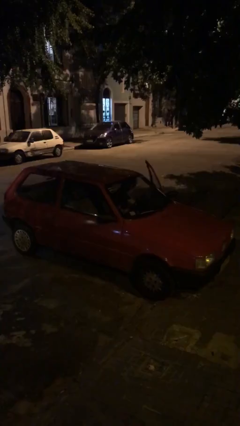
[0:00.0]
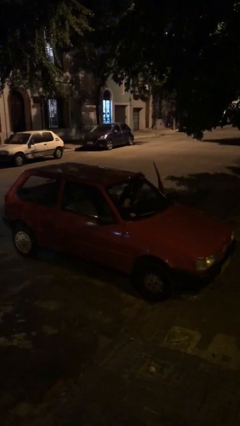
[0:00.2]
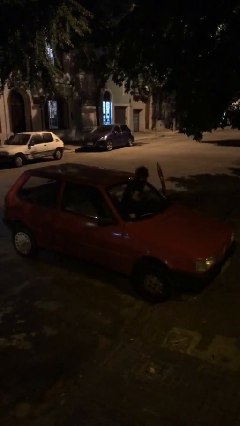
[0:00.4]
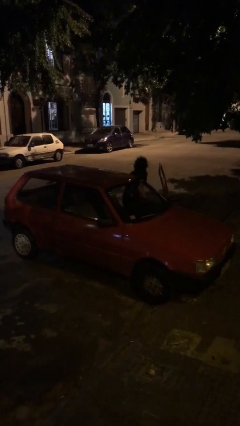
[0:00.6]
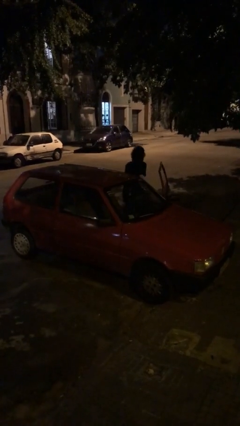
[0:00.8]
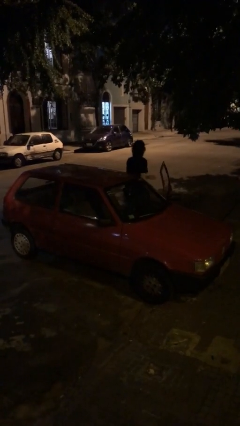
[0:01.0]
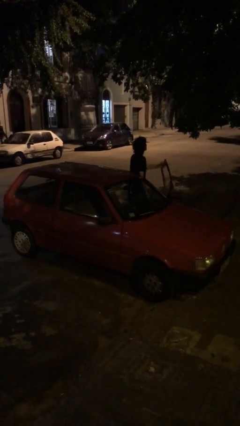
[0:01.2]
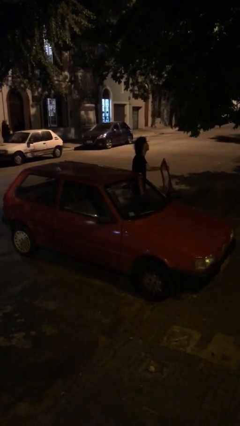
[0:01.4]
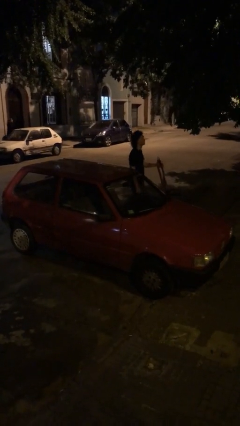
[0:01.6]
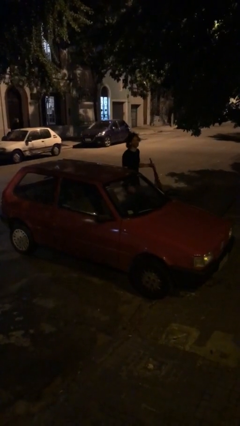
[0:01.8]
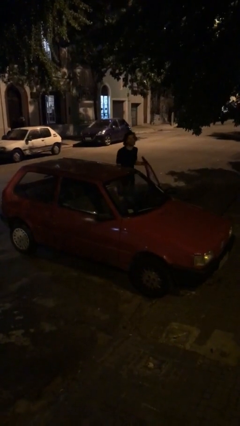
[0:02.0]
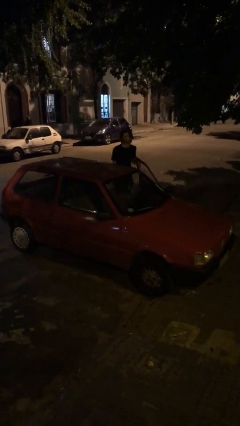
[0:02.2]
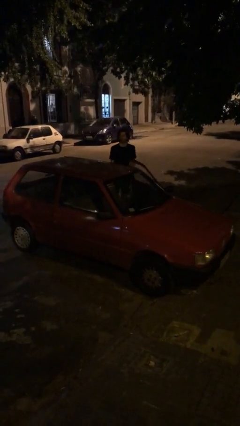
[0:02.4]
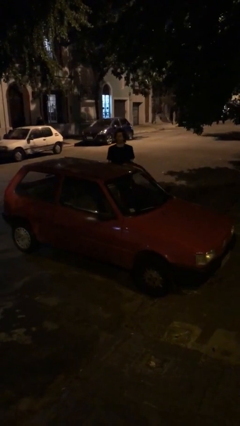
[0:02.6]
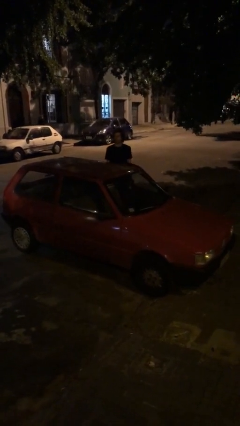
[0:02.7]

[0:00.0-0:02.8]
car drops off person

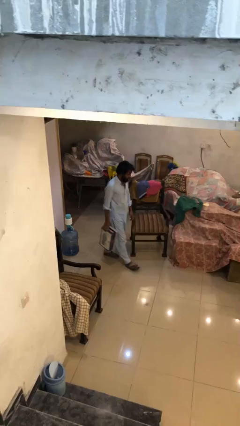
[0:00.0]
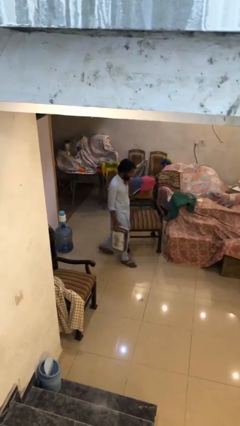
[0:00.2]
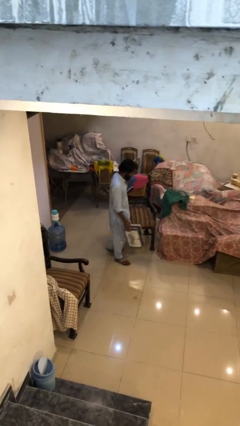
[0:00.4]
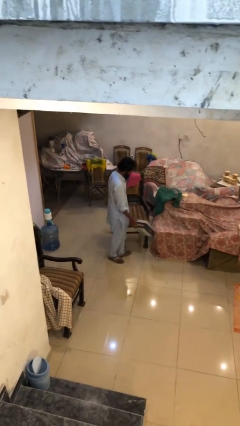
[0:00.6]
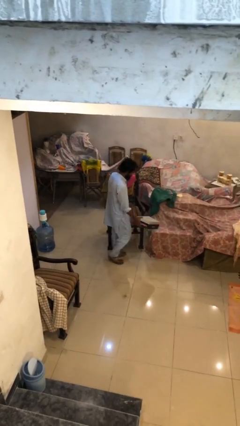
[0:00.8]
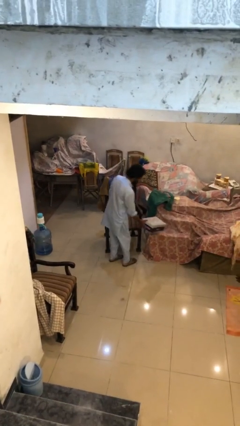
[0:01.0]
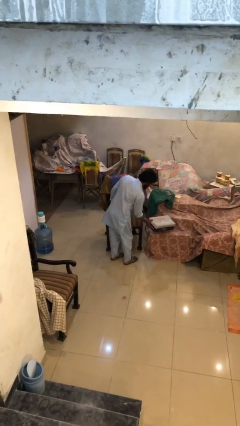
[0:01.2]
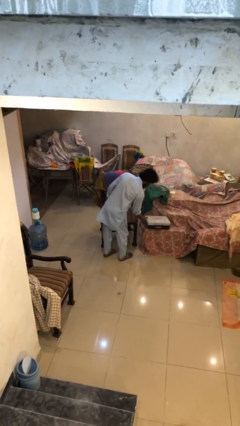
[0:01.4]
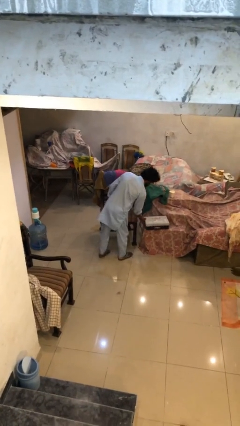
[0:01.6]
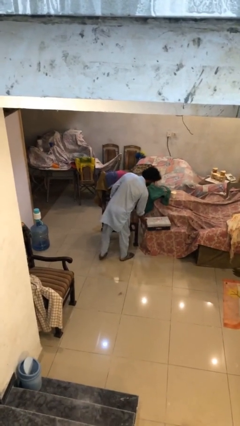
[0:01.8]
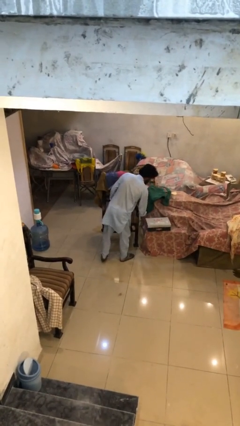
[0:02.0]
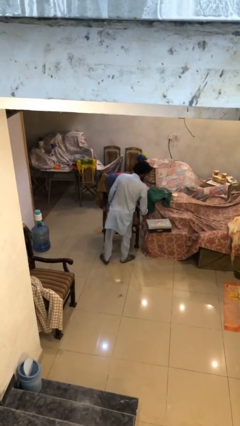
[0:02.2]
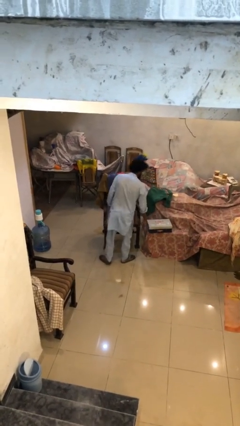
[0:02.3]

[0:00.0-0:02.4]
person puts down object on table

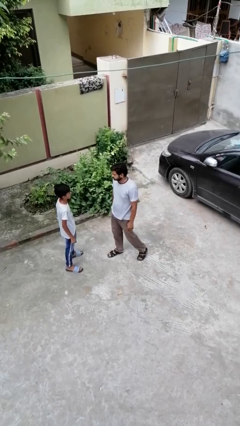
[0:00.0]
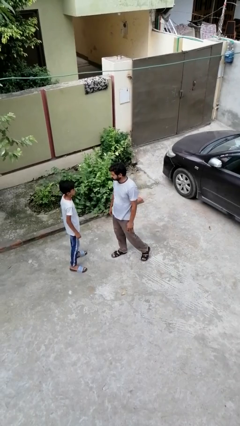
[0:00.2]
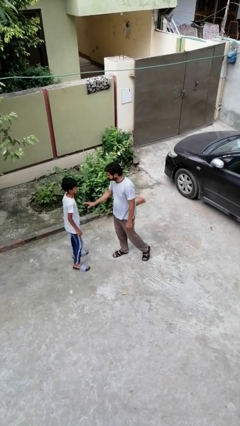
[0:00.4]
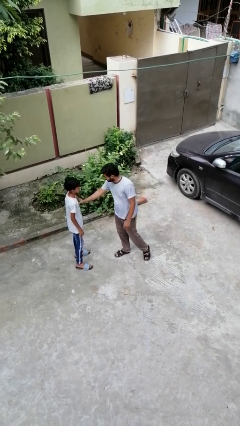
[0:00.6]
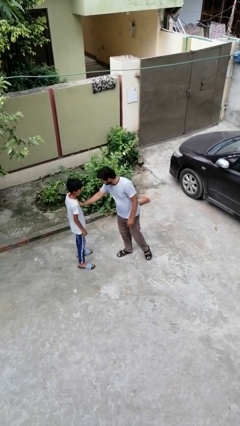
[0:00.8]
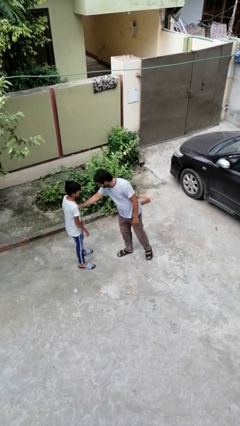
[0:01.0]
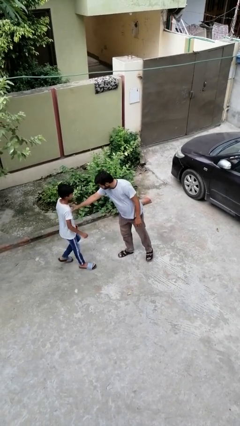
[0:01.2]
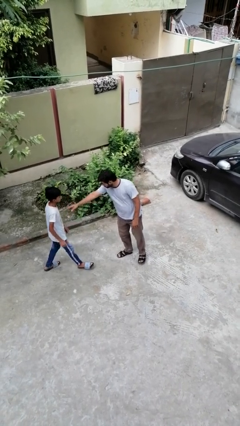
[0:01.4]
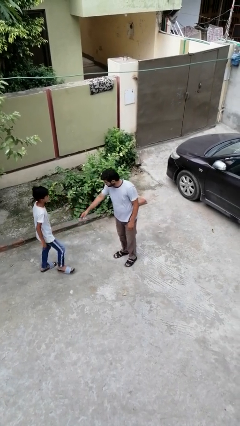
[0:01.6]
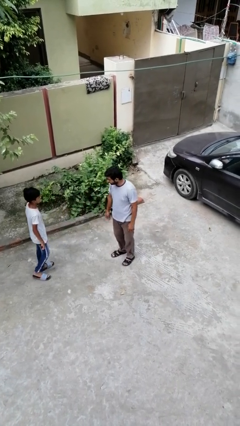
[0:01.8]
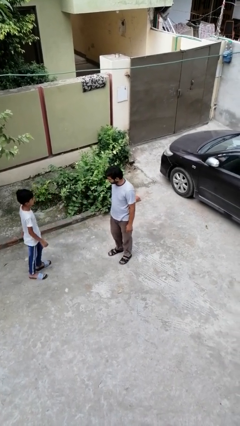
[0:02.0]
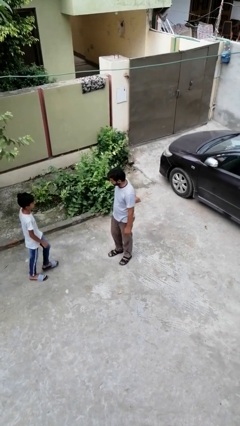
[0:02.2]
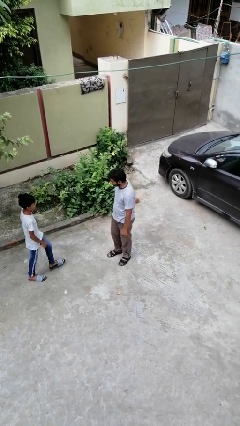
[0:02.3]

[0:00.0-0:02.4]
person shoves person

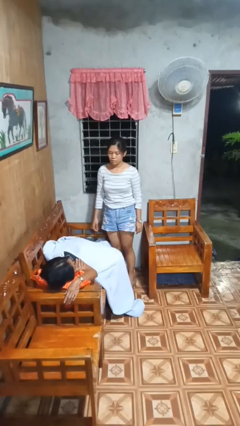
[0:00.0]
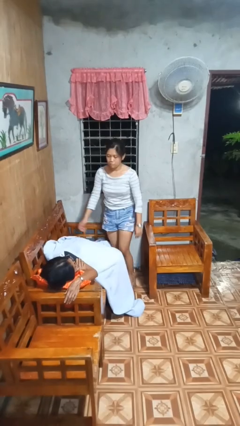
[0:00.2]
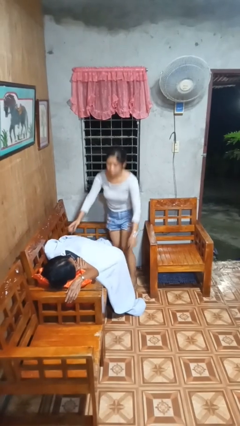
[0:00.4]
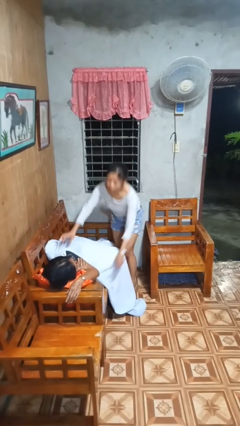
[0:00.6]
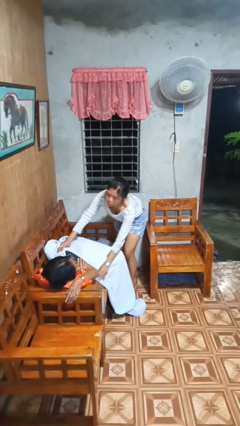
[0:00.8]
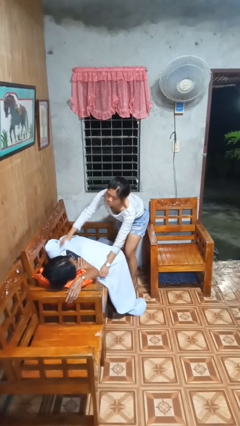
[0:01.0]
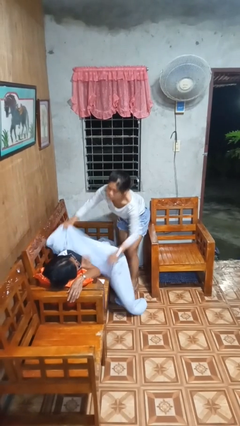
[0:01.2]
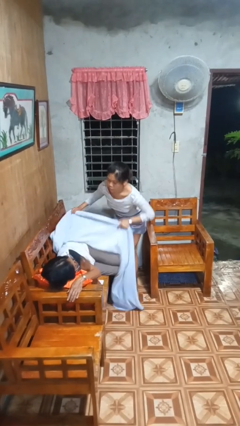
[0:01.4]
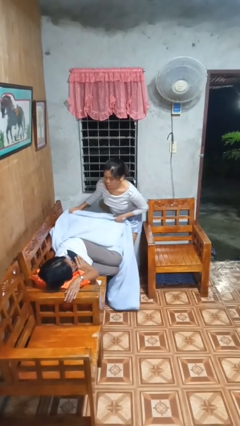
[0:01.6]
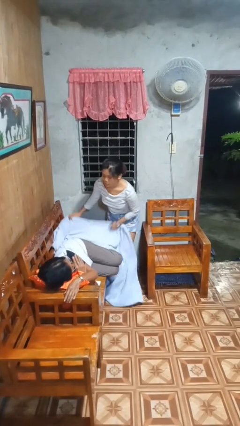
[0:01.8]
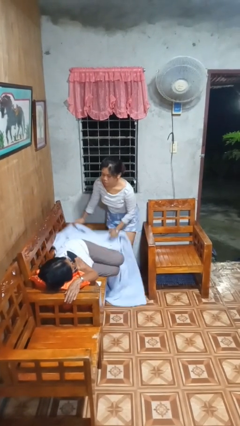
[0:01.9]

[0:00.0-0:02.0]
person uncovers friend with blanket

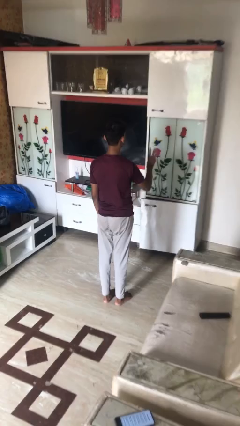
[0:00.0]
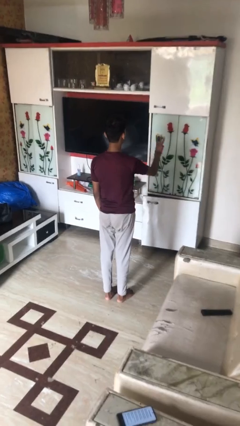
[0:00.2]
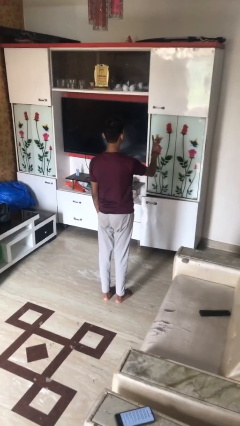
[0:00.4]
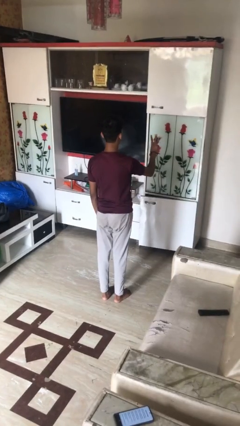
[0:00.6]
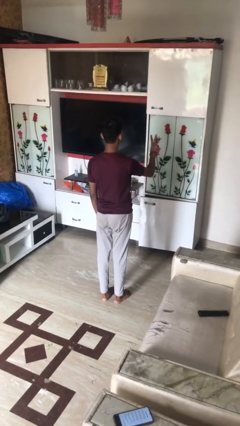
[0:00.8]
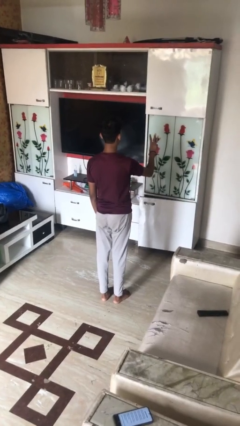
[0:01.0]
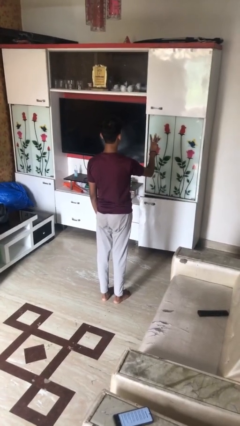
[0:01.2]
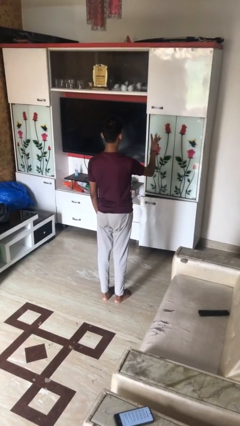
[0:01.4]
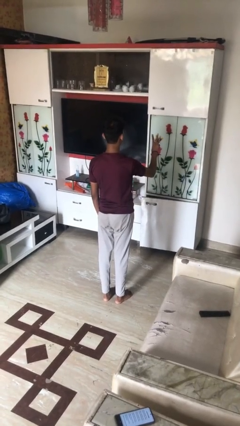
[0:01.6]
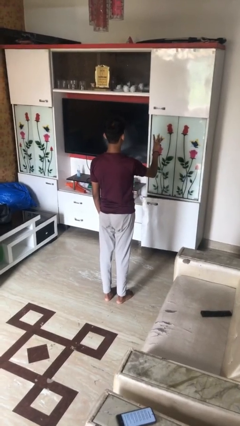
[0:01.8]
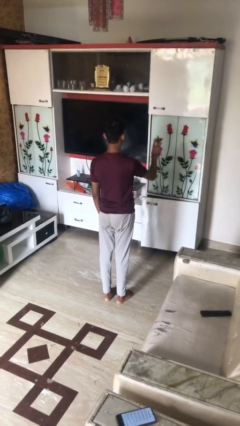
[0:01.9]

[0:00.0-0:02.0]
person gestures number three

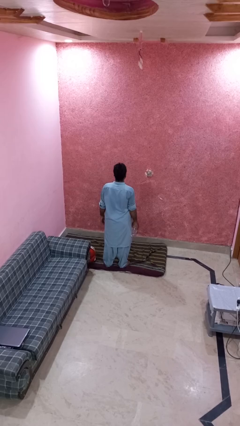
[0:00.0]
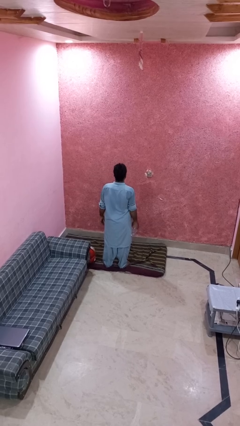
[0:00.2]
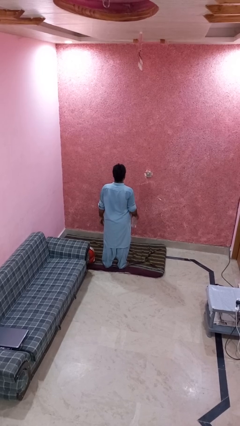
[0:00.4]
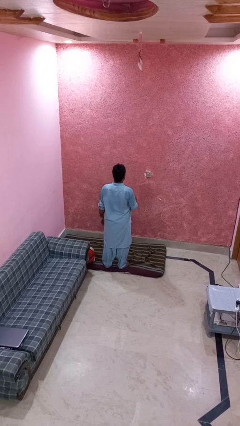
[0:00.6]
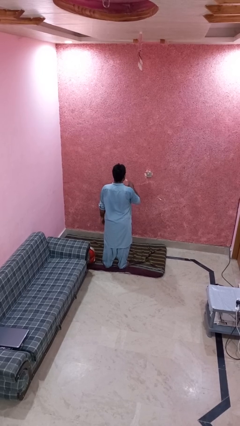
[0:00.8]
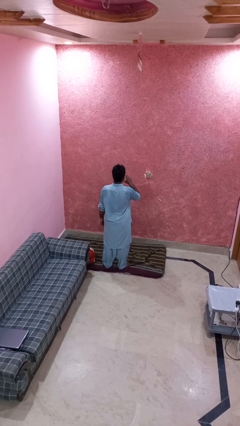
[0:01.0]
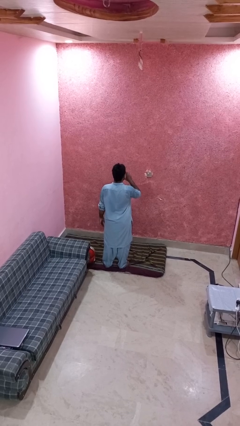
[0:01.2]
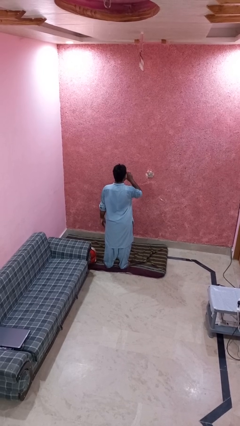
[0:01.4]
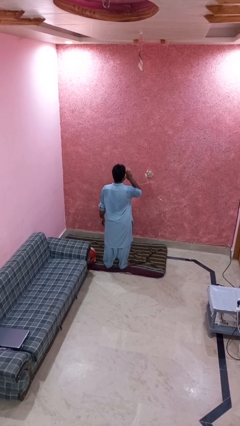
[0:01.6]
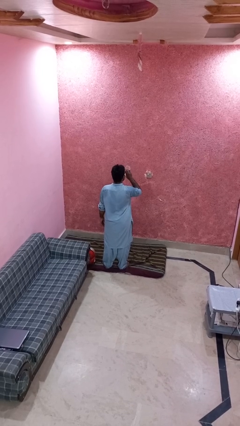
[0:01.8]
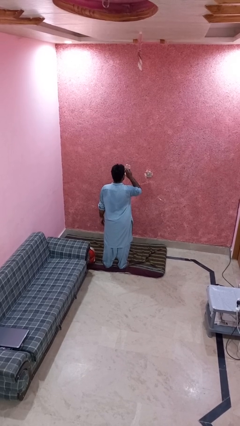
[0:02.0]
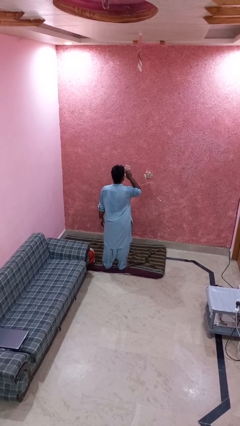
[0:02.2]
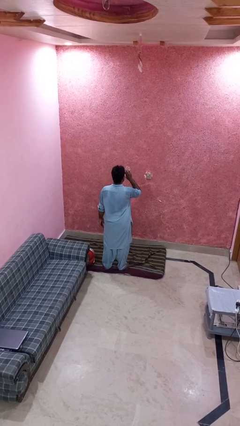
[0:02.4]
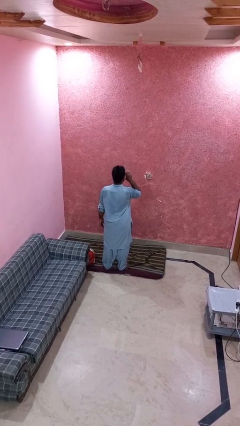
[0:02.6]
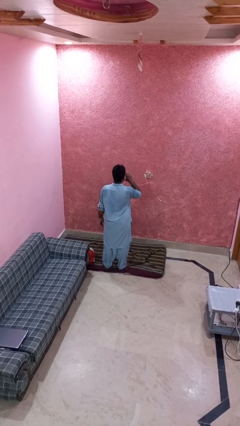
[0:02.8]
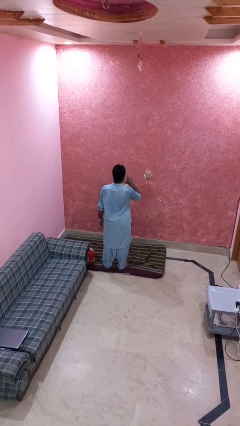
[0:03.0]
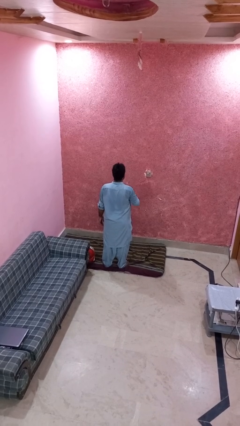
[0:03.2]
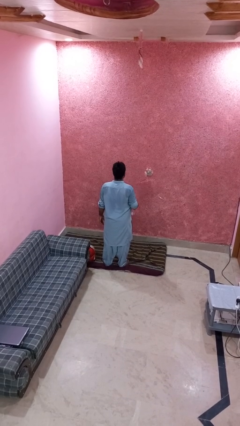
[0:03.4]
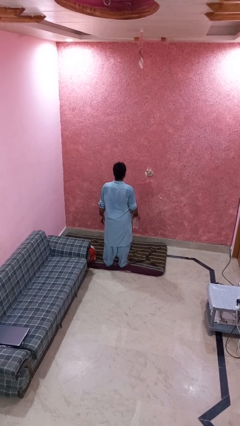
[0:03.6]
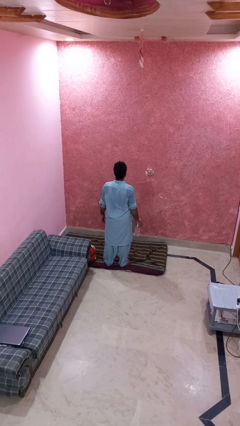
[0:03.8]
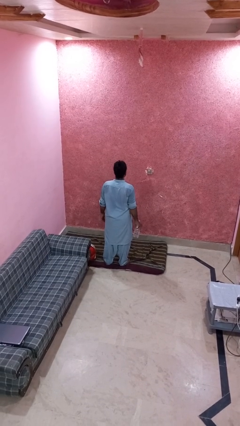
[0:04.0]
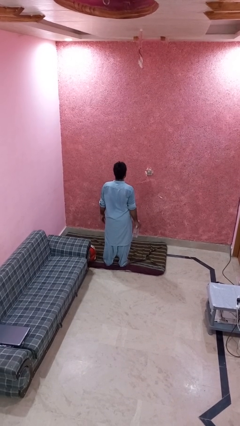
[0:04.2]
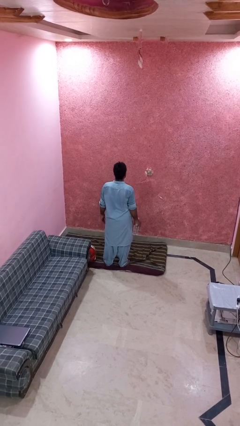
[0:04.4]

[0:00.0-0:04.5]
person drinks from bottle

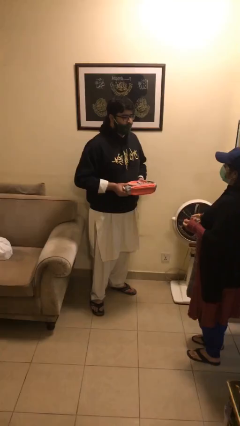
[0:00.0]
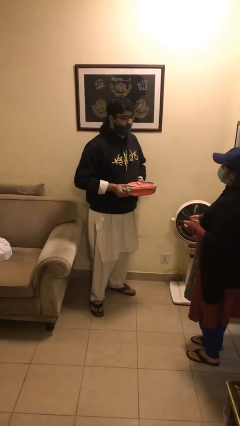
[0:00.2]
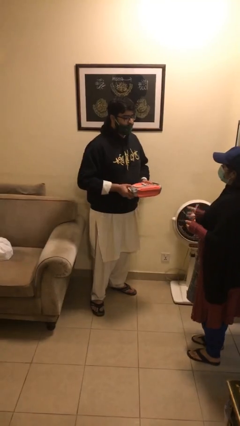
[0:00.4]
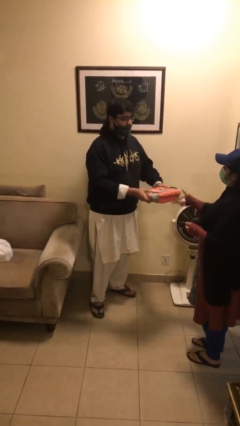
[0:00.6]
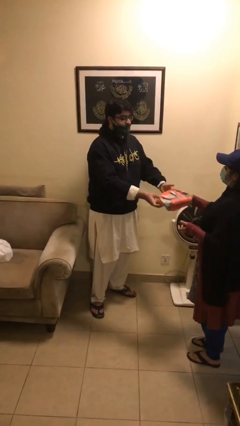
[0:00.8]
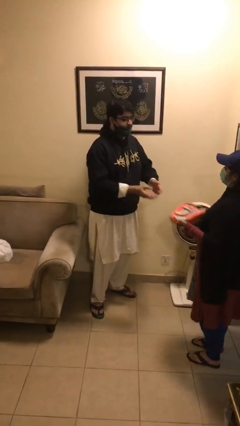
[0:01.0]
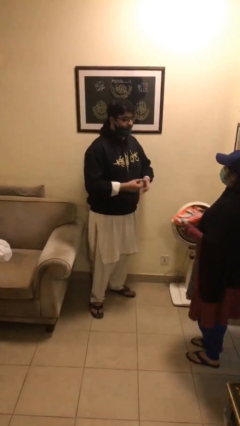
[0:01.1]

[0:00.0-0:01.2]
person transfers object to person
